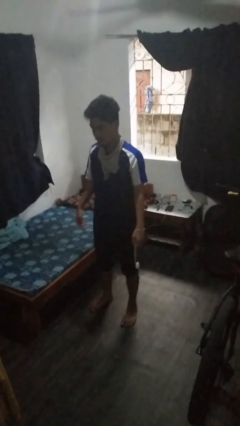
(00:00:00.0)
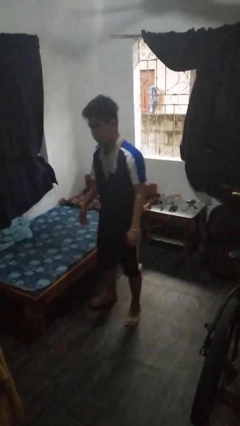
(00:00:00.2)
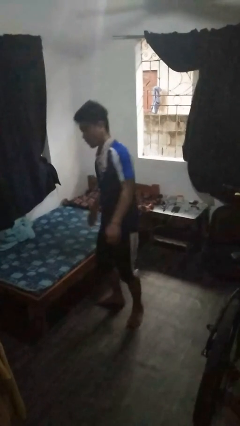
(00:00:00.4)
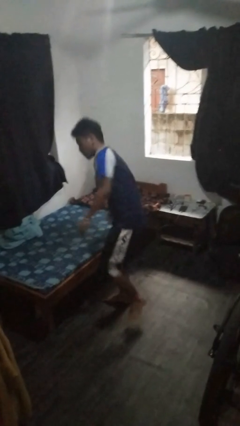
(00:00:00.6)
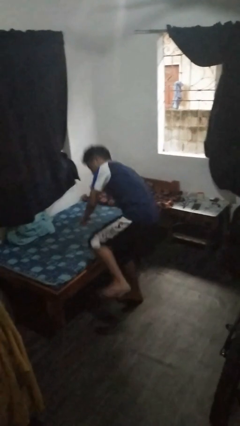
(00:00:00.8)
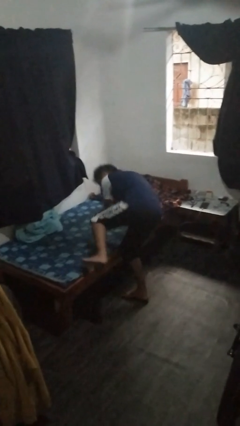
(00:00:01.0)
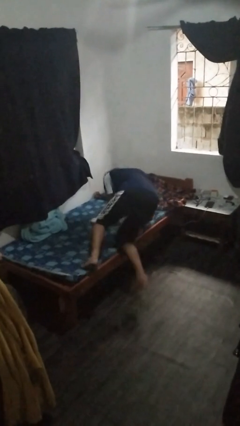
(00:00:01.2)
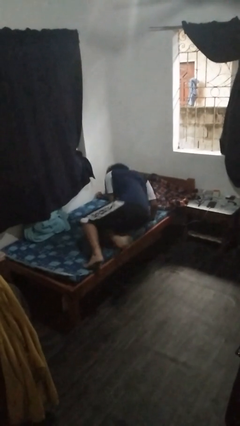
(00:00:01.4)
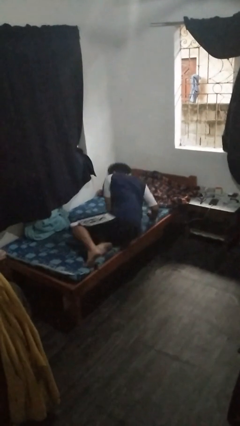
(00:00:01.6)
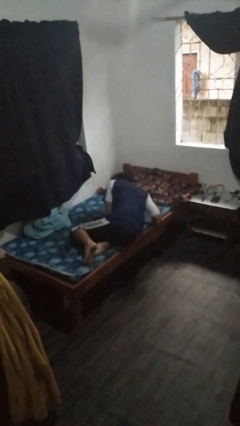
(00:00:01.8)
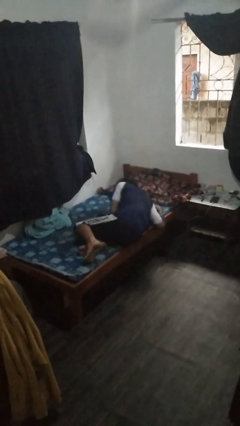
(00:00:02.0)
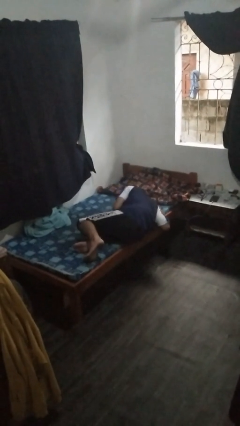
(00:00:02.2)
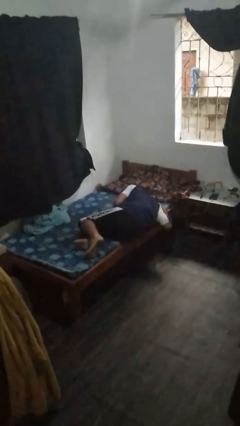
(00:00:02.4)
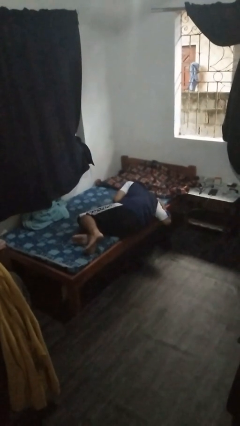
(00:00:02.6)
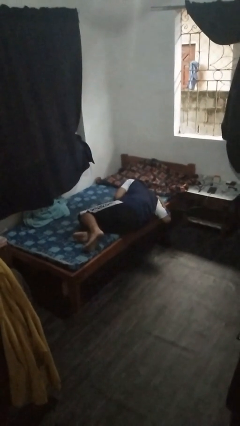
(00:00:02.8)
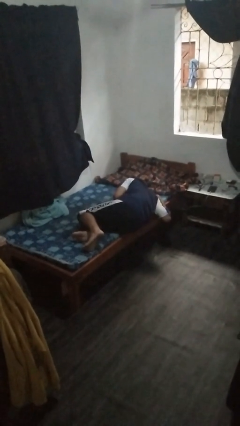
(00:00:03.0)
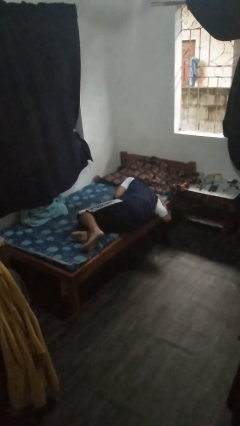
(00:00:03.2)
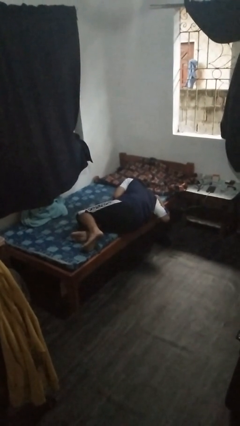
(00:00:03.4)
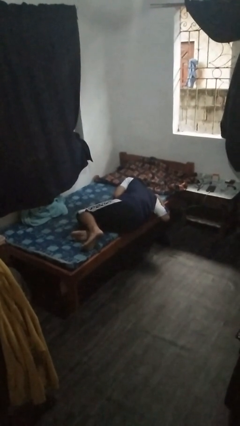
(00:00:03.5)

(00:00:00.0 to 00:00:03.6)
person lies down on bed

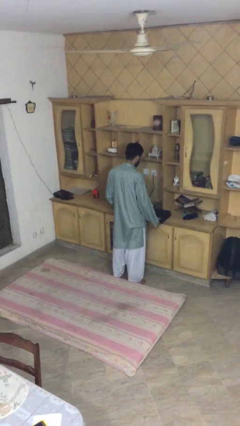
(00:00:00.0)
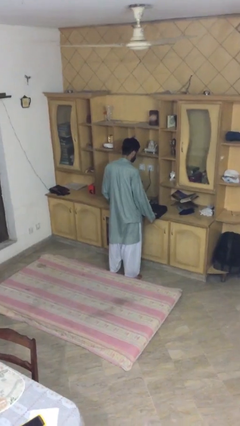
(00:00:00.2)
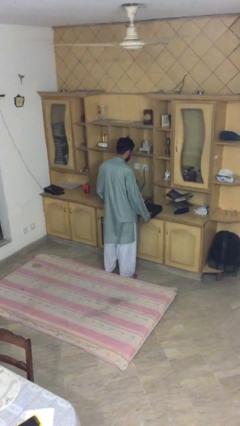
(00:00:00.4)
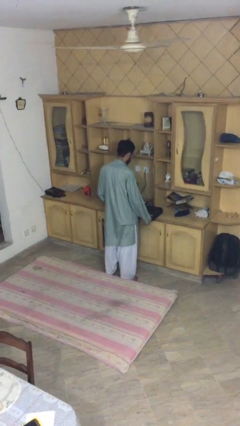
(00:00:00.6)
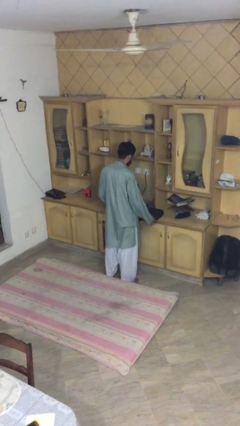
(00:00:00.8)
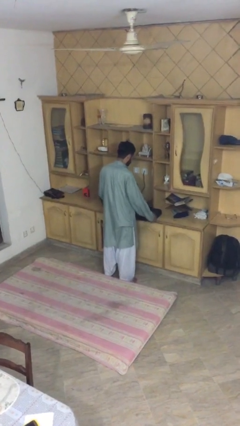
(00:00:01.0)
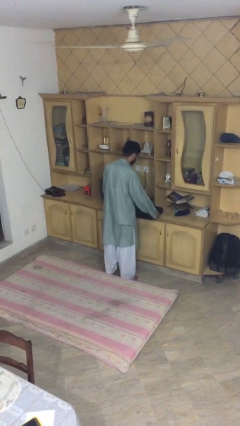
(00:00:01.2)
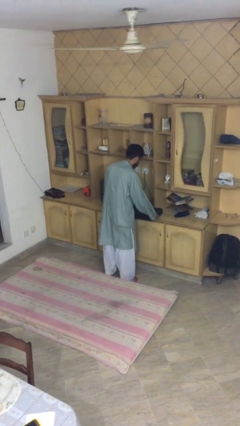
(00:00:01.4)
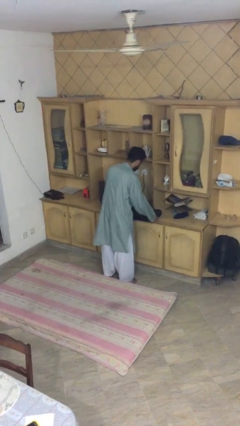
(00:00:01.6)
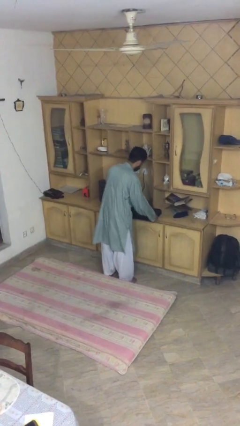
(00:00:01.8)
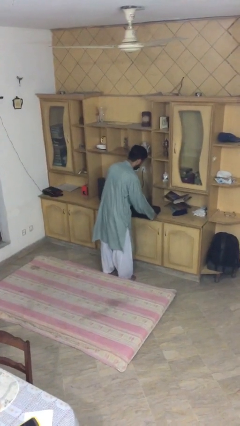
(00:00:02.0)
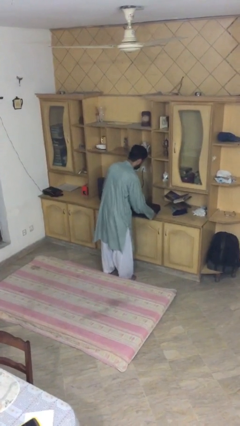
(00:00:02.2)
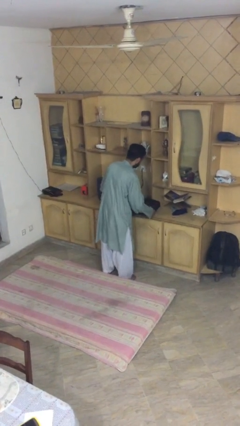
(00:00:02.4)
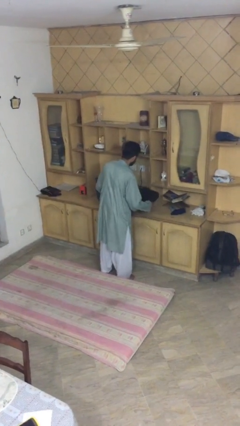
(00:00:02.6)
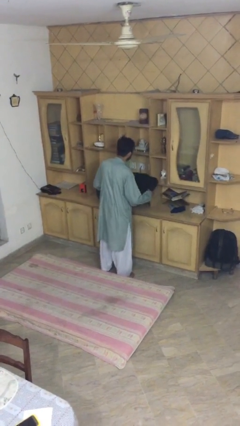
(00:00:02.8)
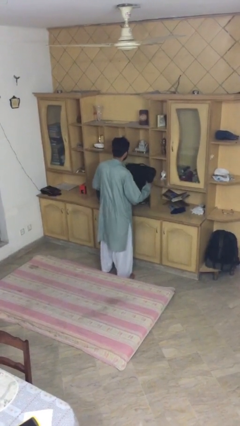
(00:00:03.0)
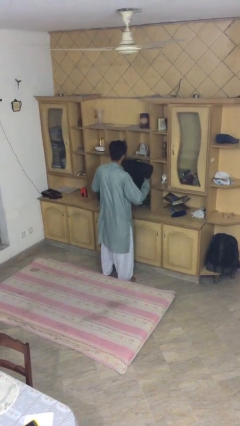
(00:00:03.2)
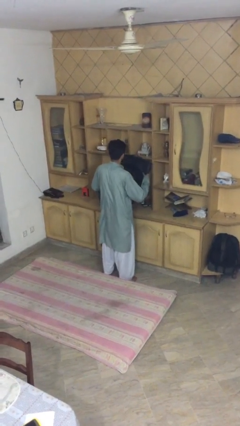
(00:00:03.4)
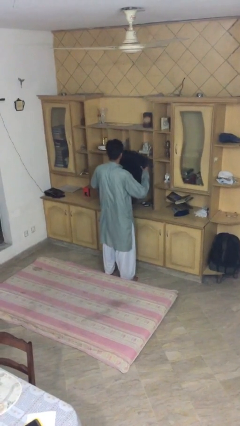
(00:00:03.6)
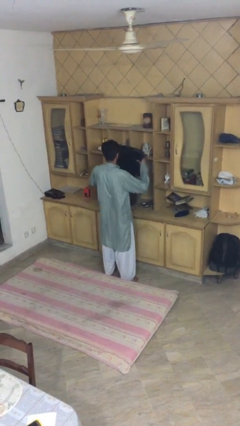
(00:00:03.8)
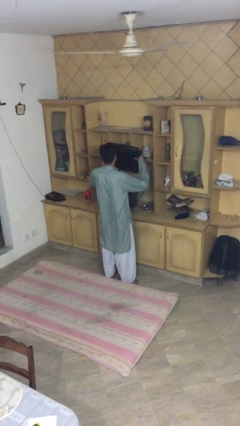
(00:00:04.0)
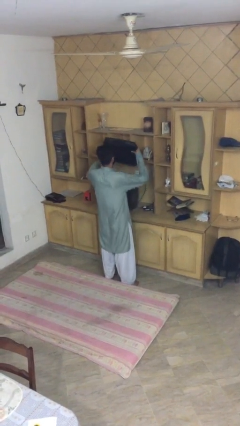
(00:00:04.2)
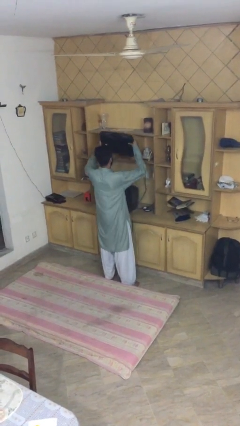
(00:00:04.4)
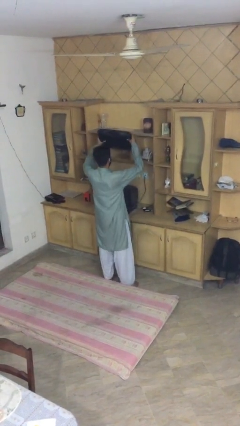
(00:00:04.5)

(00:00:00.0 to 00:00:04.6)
person picks up object from table

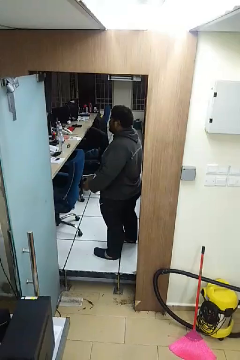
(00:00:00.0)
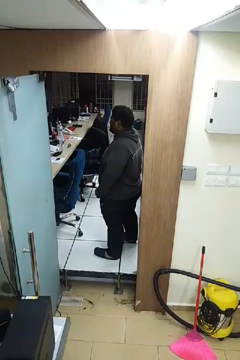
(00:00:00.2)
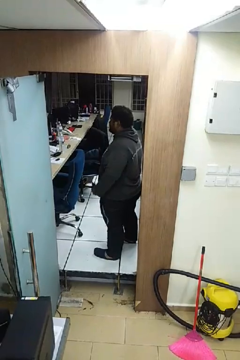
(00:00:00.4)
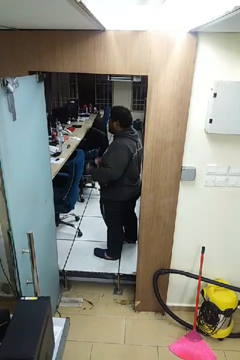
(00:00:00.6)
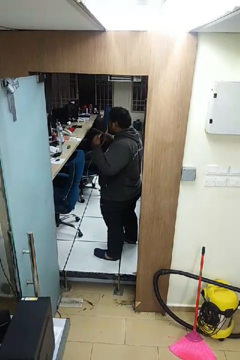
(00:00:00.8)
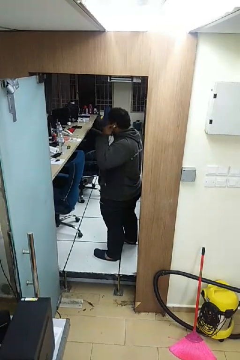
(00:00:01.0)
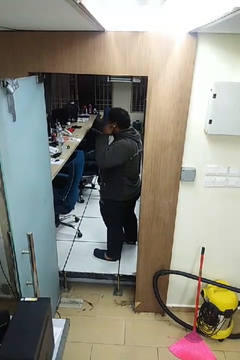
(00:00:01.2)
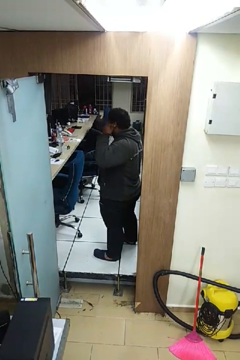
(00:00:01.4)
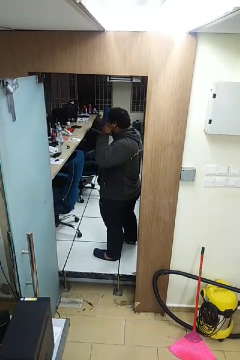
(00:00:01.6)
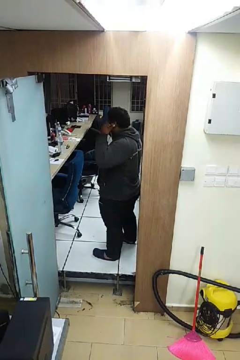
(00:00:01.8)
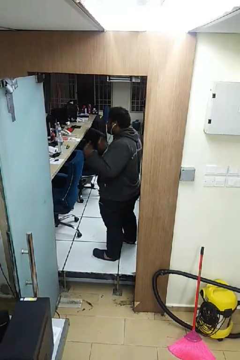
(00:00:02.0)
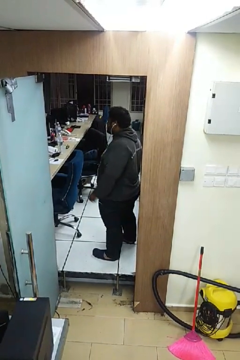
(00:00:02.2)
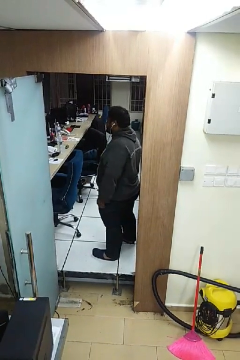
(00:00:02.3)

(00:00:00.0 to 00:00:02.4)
person puts on headphones

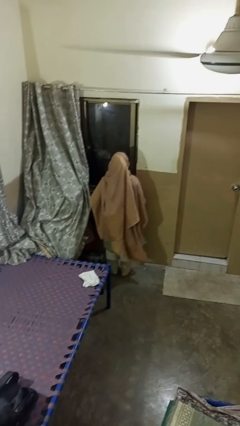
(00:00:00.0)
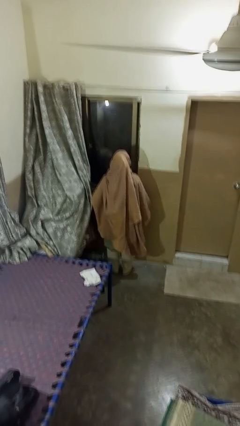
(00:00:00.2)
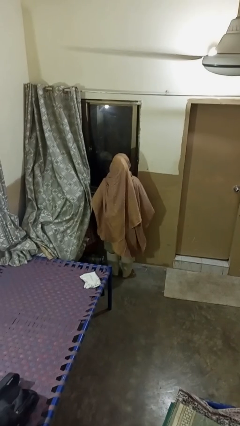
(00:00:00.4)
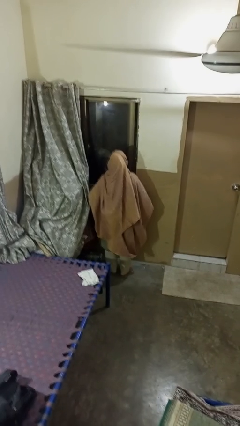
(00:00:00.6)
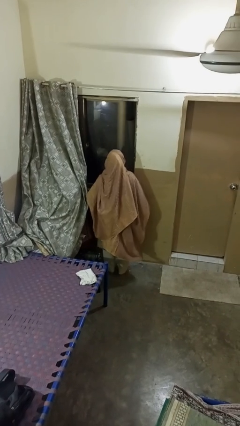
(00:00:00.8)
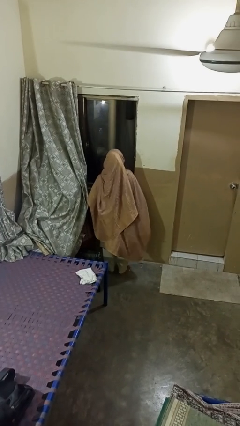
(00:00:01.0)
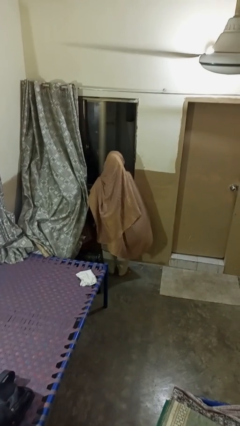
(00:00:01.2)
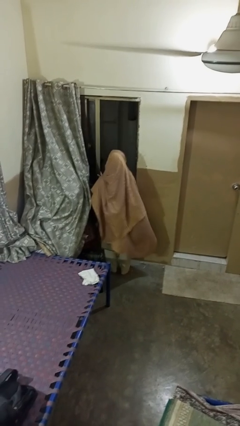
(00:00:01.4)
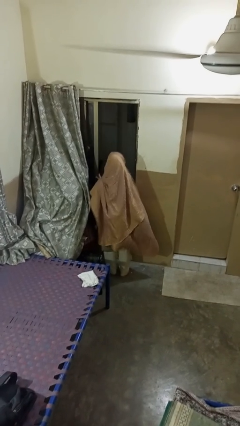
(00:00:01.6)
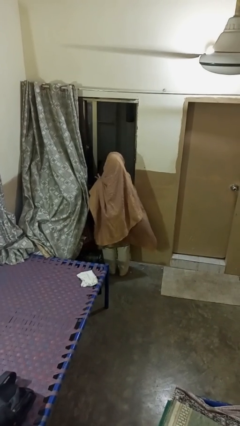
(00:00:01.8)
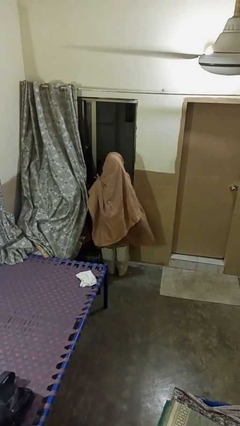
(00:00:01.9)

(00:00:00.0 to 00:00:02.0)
person opens home window

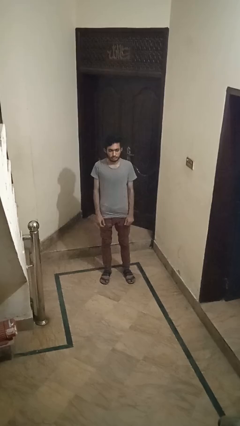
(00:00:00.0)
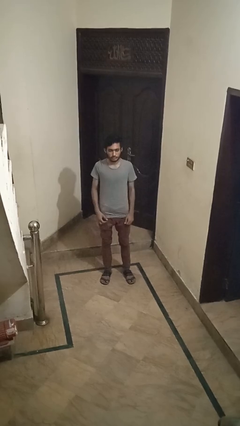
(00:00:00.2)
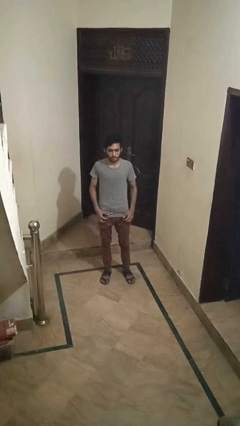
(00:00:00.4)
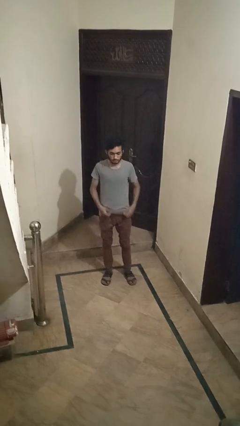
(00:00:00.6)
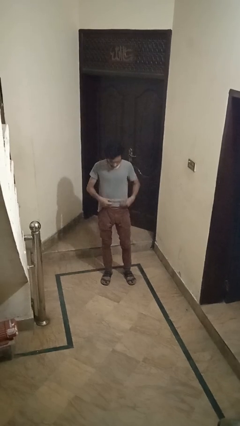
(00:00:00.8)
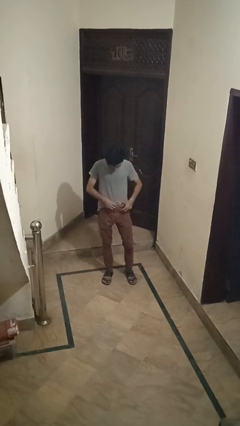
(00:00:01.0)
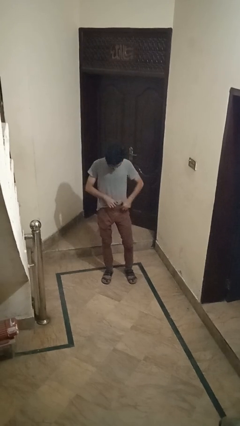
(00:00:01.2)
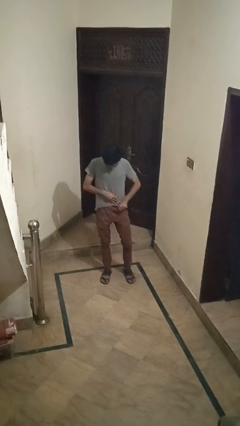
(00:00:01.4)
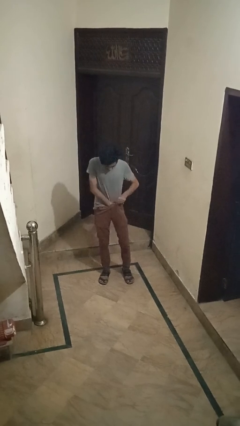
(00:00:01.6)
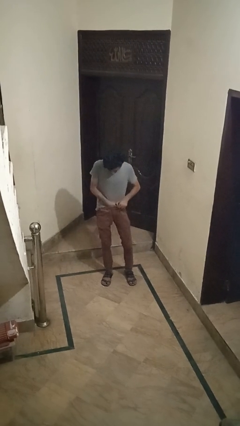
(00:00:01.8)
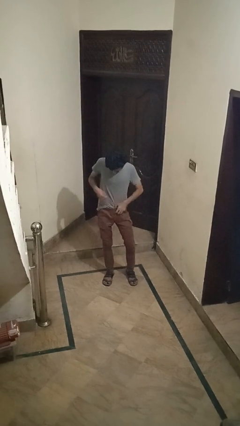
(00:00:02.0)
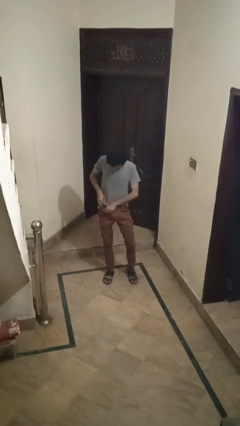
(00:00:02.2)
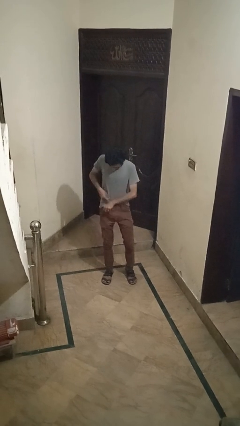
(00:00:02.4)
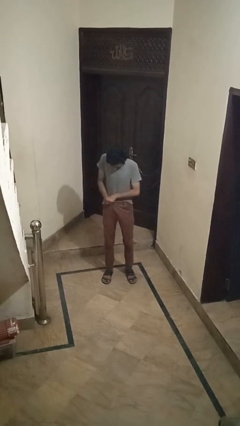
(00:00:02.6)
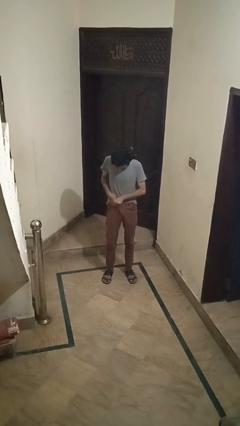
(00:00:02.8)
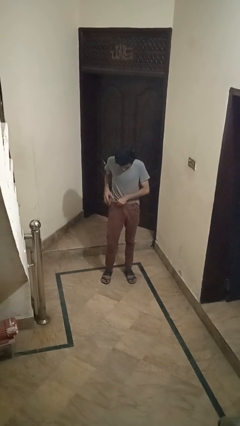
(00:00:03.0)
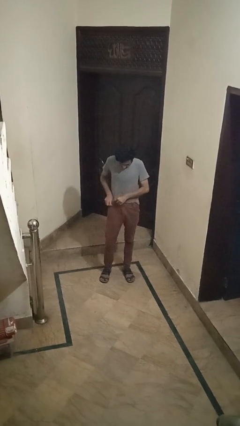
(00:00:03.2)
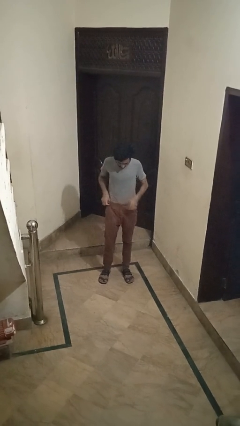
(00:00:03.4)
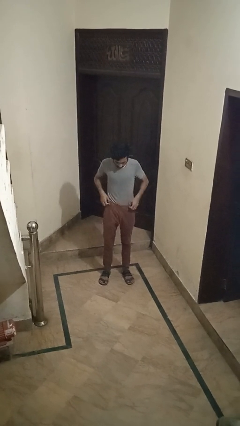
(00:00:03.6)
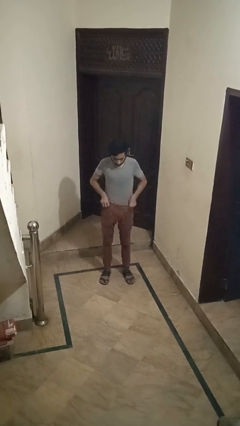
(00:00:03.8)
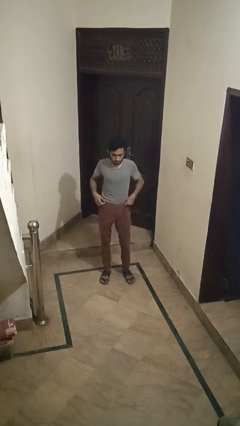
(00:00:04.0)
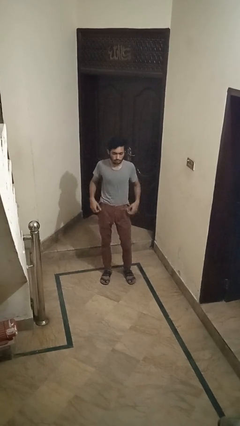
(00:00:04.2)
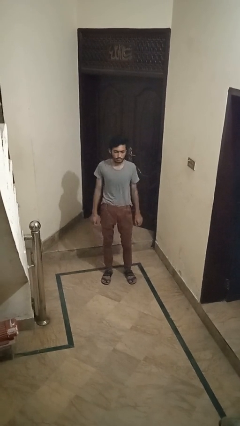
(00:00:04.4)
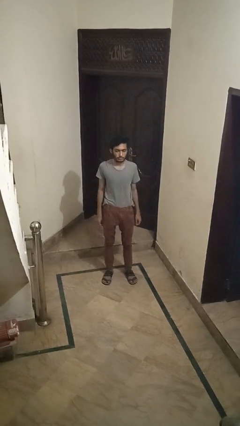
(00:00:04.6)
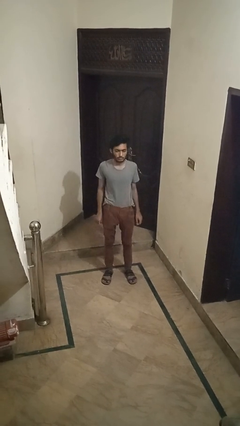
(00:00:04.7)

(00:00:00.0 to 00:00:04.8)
person tucks in shirt

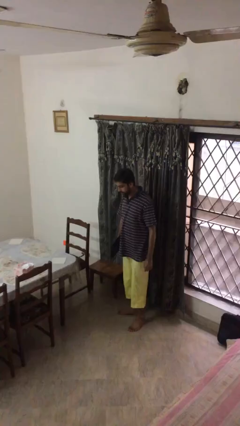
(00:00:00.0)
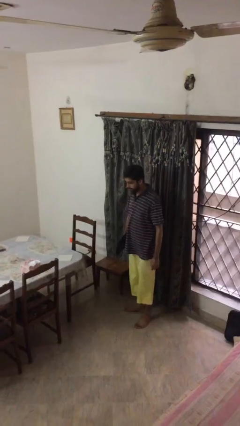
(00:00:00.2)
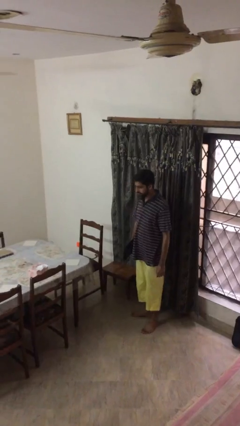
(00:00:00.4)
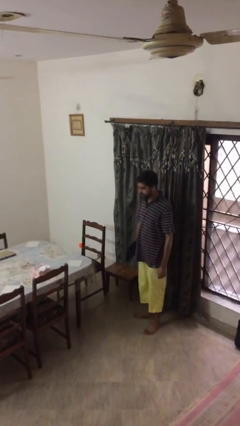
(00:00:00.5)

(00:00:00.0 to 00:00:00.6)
person sits down
